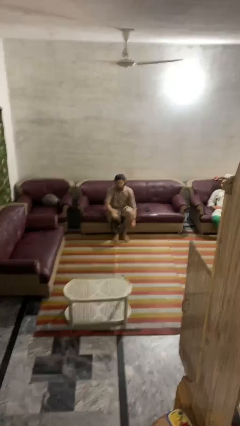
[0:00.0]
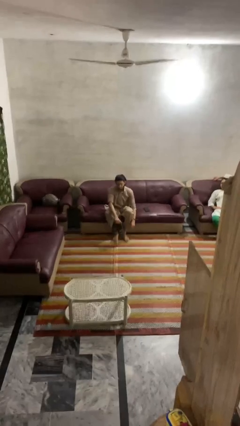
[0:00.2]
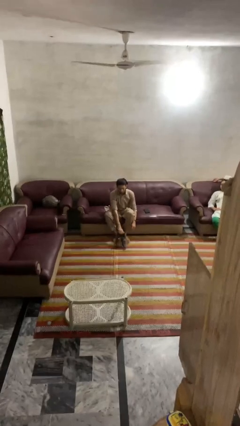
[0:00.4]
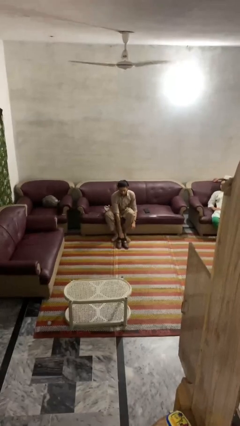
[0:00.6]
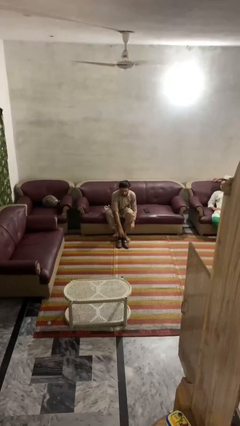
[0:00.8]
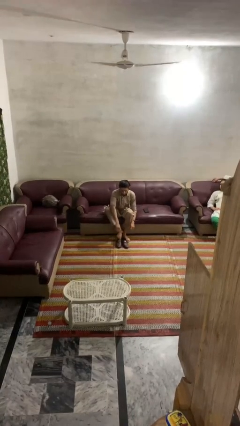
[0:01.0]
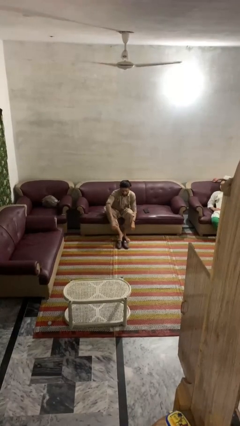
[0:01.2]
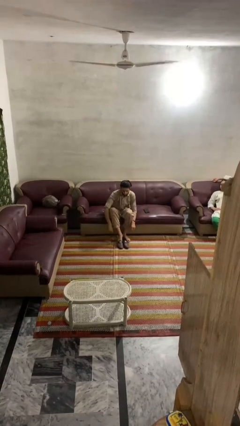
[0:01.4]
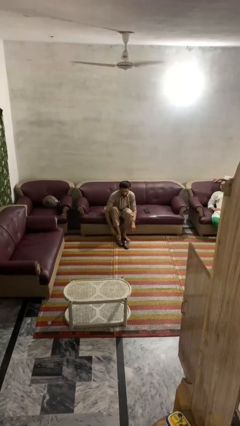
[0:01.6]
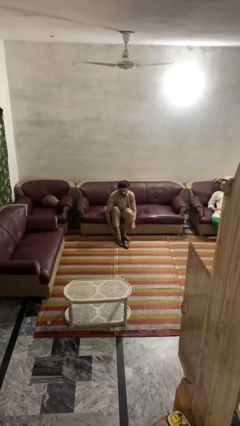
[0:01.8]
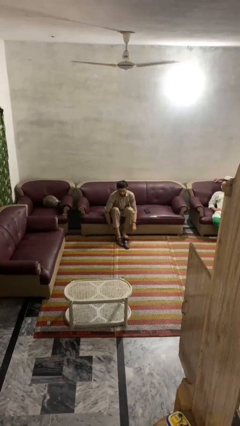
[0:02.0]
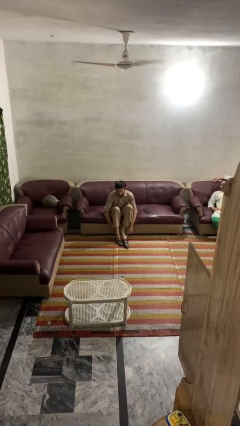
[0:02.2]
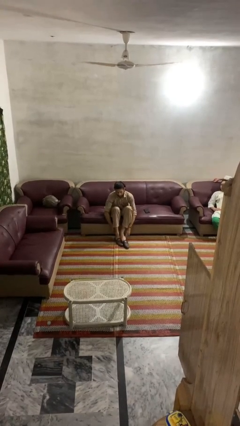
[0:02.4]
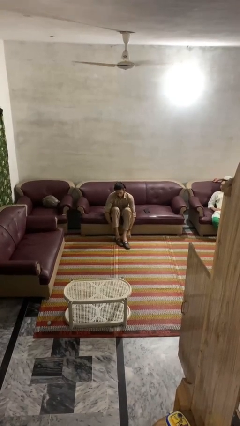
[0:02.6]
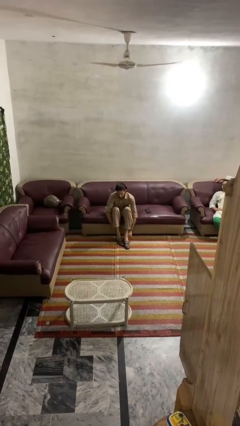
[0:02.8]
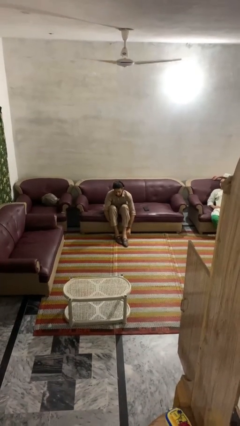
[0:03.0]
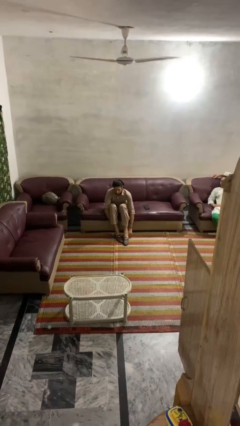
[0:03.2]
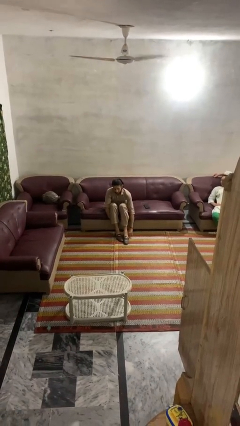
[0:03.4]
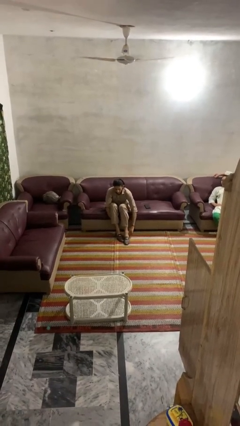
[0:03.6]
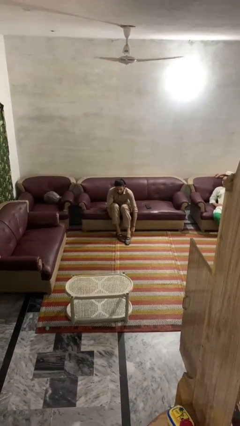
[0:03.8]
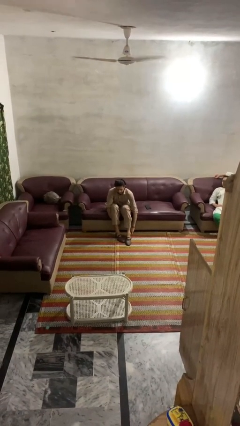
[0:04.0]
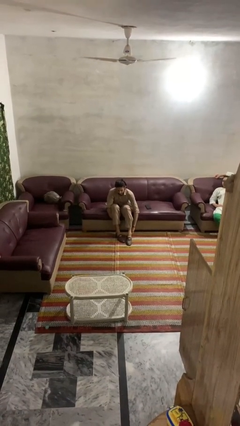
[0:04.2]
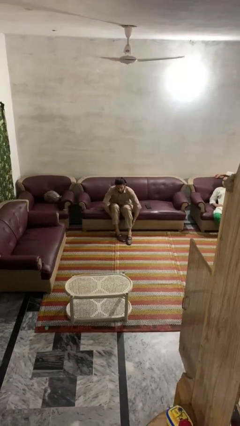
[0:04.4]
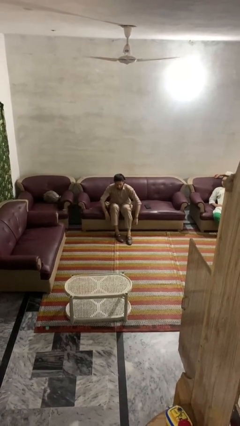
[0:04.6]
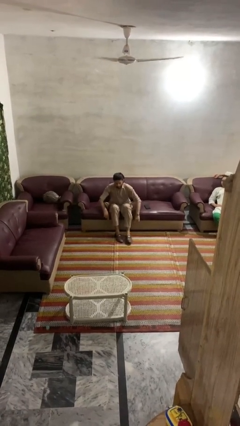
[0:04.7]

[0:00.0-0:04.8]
person puts on shoes

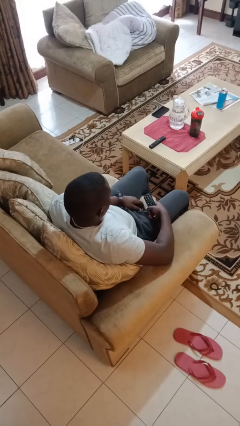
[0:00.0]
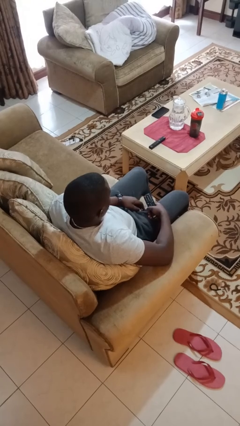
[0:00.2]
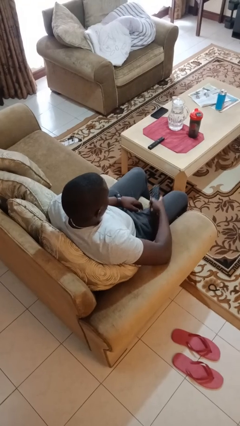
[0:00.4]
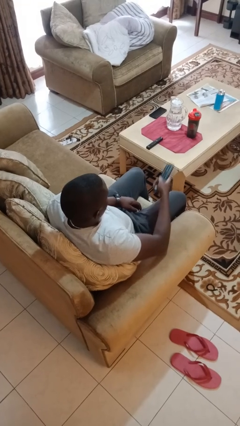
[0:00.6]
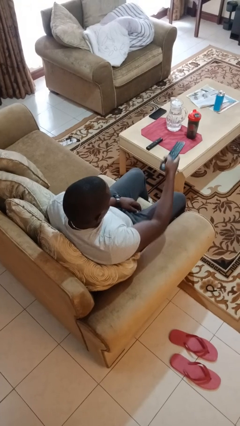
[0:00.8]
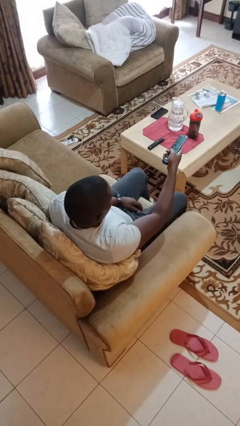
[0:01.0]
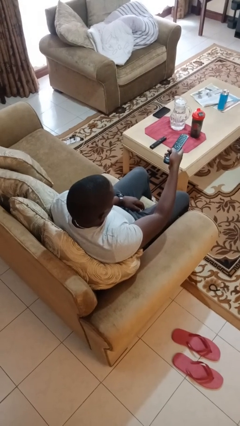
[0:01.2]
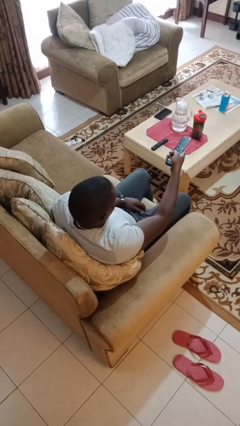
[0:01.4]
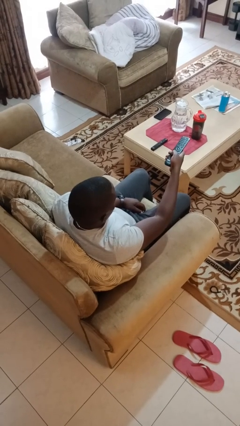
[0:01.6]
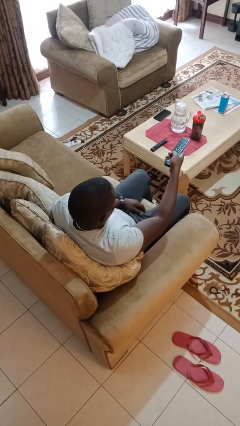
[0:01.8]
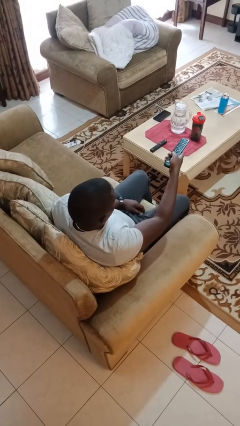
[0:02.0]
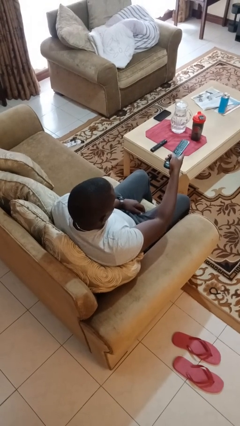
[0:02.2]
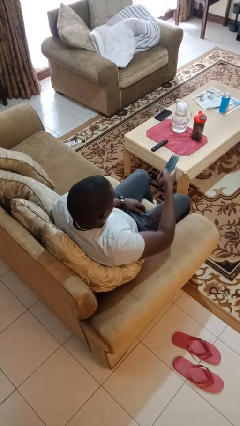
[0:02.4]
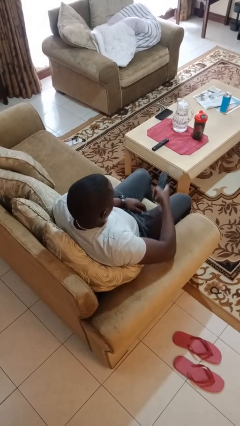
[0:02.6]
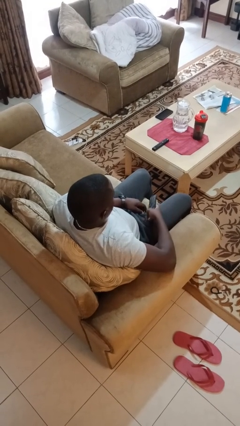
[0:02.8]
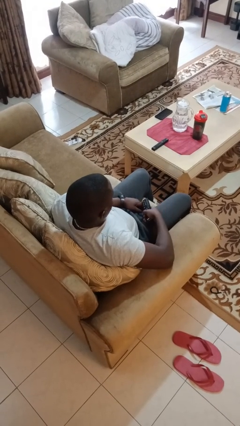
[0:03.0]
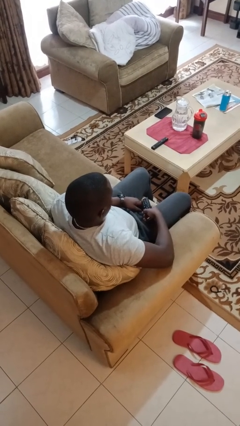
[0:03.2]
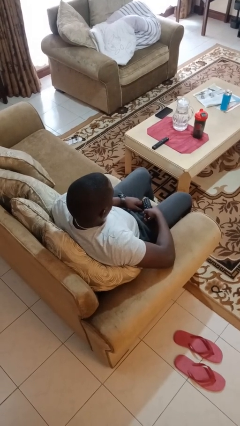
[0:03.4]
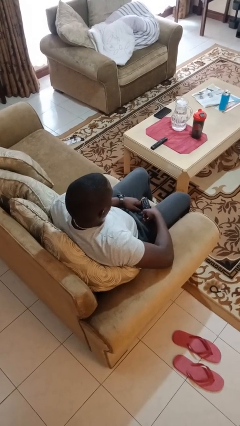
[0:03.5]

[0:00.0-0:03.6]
person uses television remote

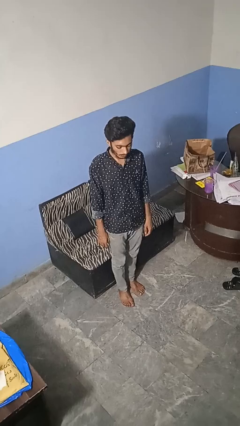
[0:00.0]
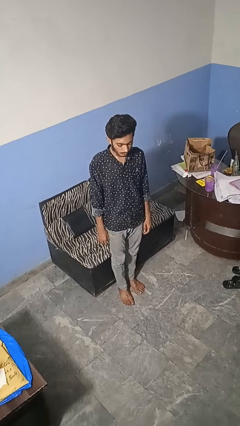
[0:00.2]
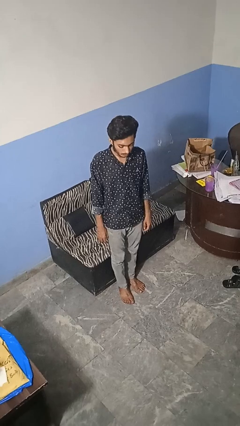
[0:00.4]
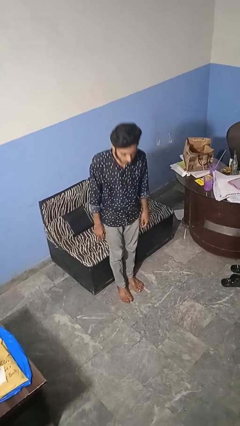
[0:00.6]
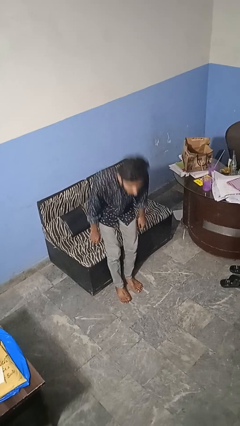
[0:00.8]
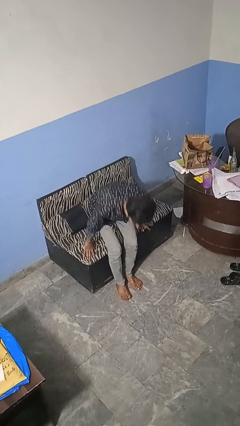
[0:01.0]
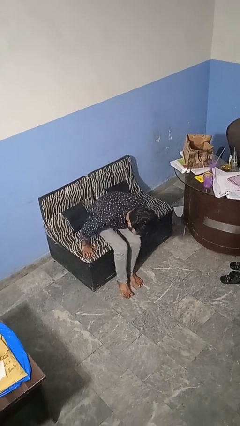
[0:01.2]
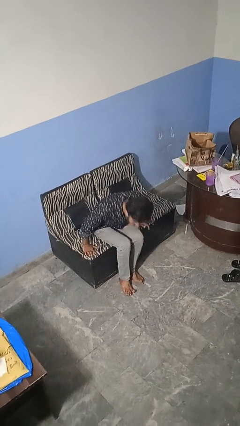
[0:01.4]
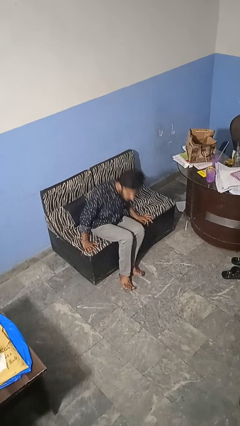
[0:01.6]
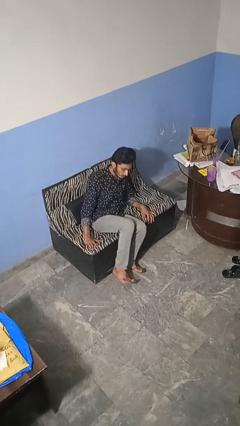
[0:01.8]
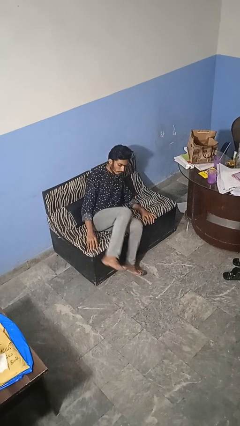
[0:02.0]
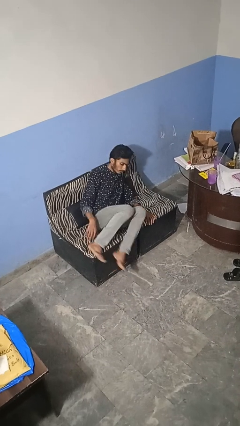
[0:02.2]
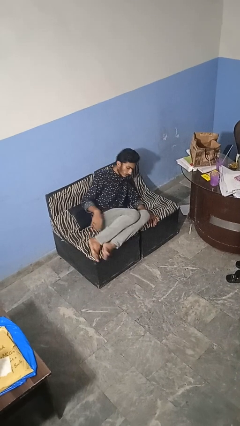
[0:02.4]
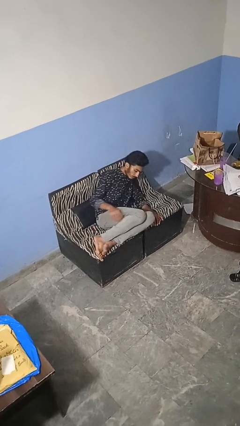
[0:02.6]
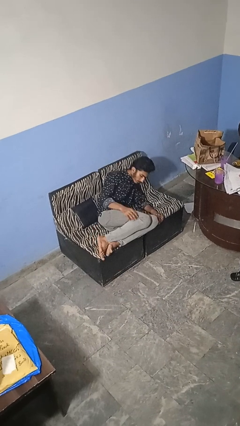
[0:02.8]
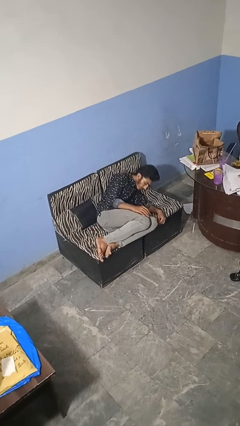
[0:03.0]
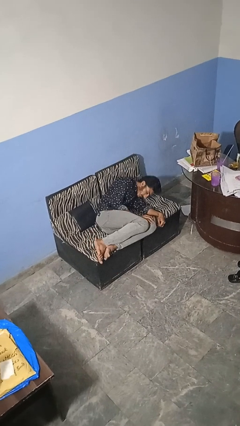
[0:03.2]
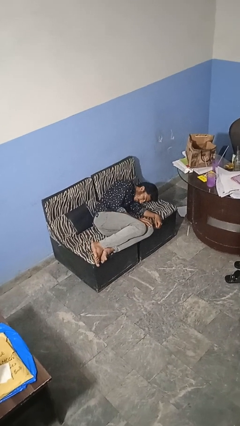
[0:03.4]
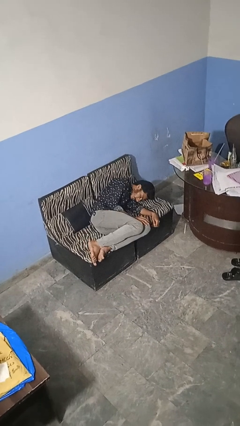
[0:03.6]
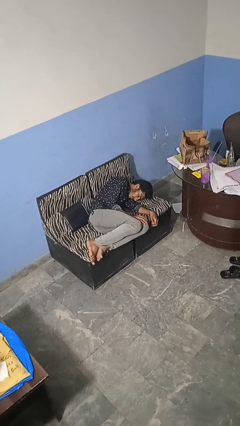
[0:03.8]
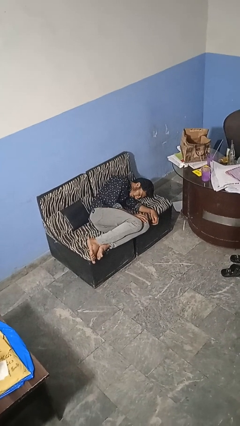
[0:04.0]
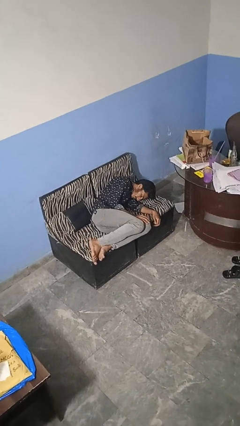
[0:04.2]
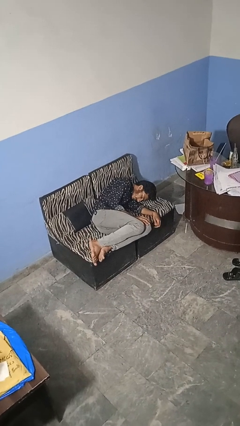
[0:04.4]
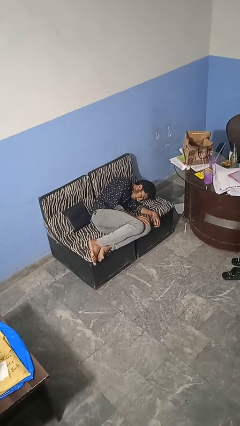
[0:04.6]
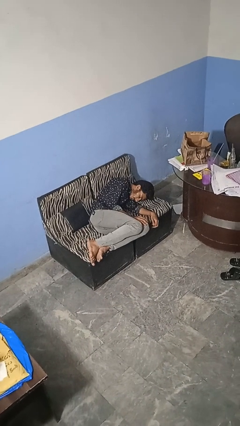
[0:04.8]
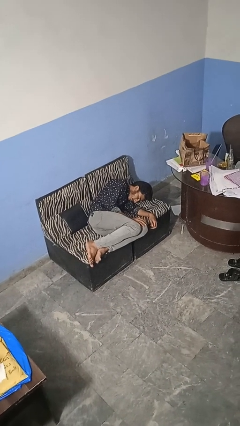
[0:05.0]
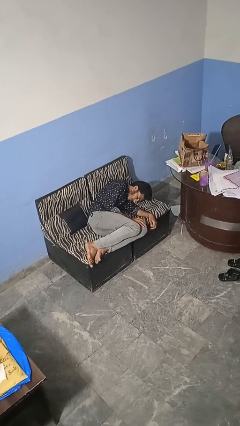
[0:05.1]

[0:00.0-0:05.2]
person lies down on couch

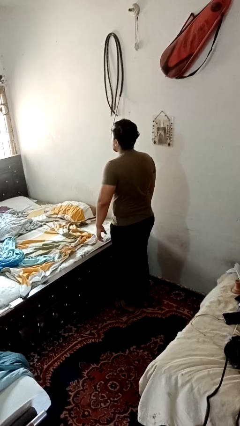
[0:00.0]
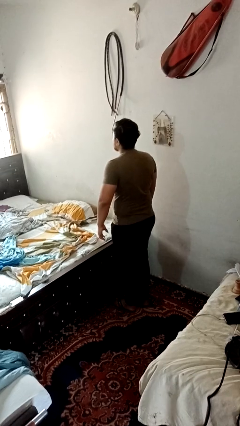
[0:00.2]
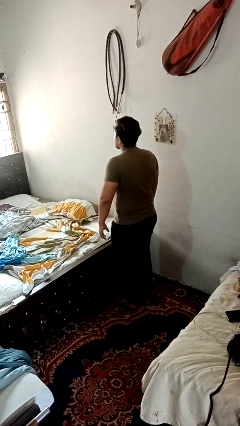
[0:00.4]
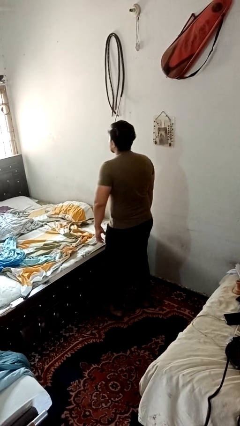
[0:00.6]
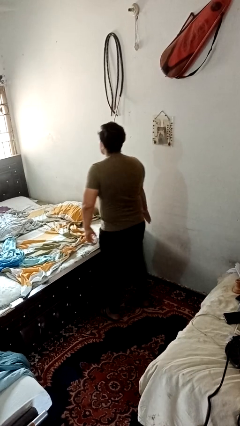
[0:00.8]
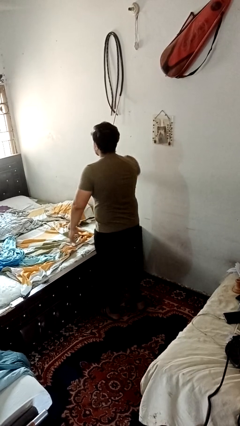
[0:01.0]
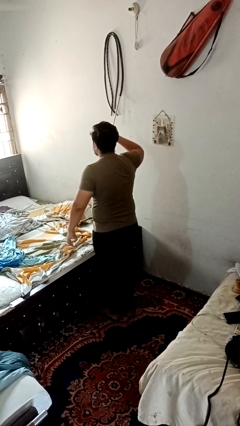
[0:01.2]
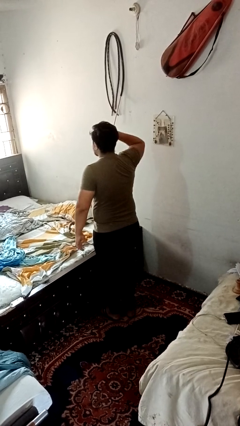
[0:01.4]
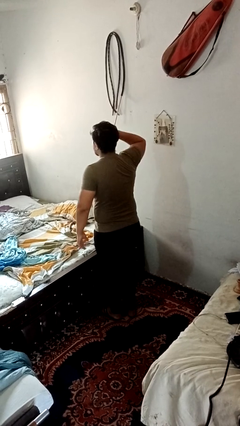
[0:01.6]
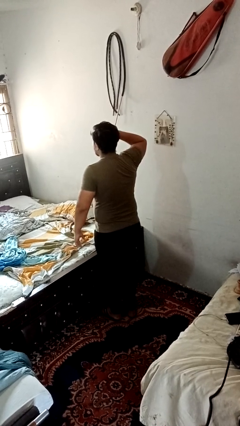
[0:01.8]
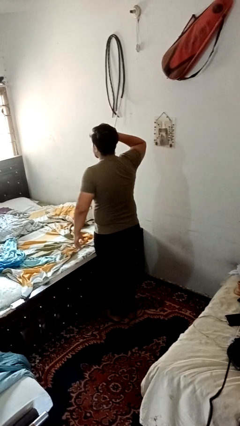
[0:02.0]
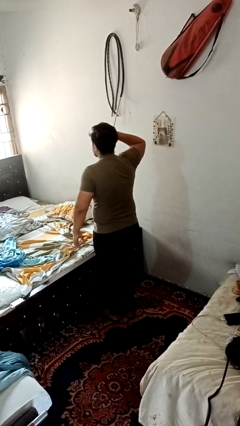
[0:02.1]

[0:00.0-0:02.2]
person salutes

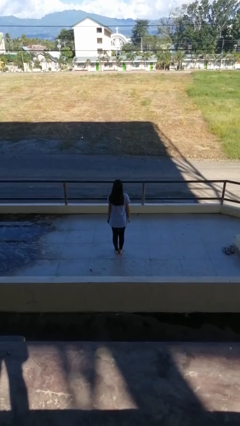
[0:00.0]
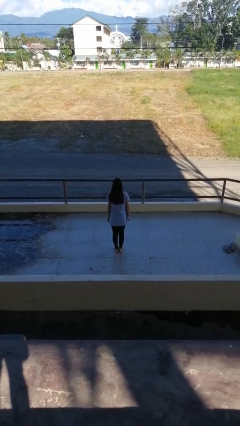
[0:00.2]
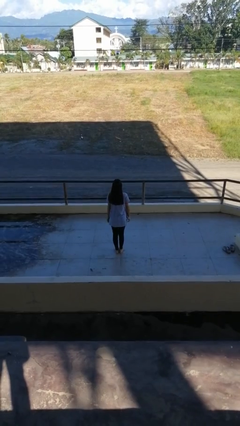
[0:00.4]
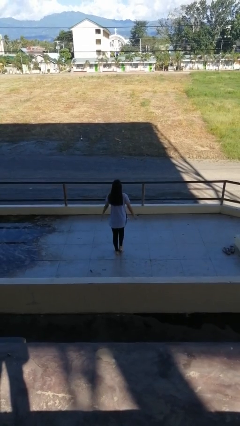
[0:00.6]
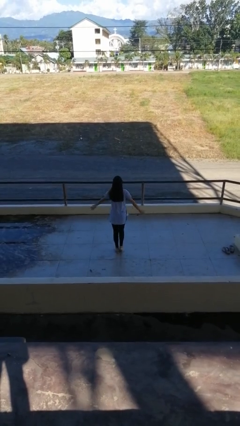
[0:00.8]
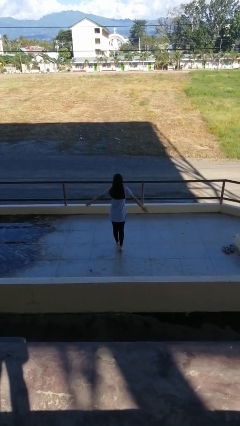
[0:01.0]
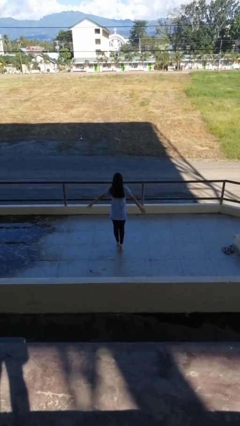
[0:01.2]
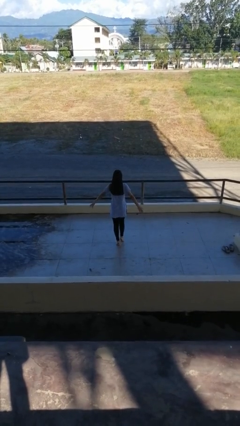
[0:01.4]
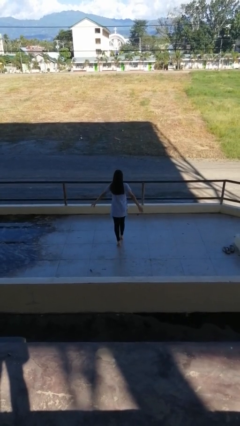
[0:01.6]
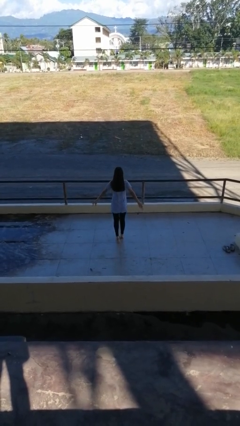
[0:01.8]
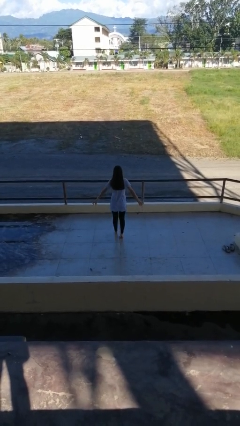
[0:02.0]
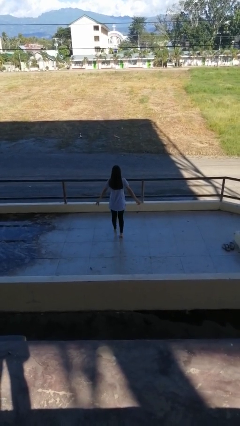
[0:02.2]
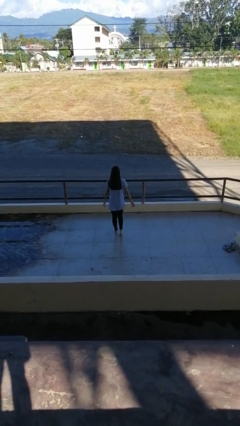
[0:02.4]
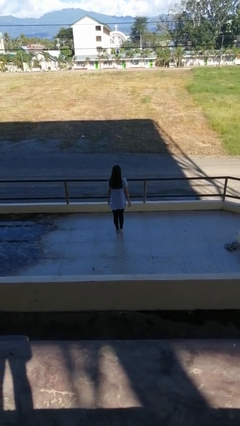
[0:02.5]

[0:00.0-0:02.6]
person walks tiptoe
